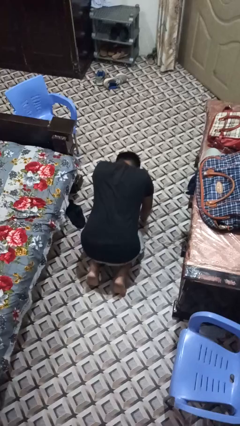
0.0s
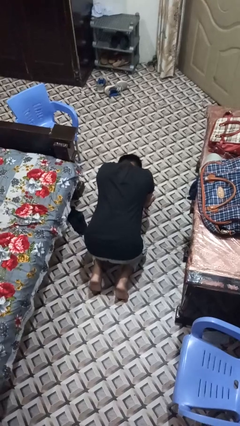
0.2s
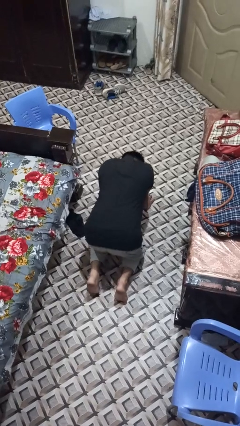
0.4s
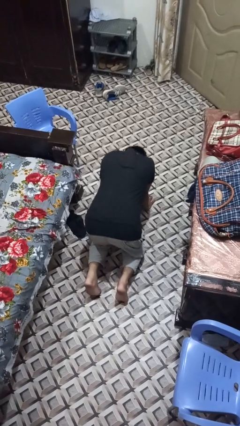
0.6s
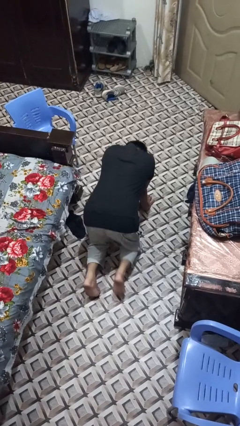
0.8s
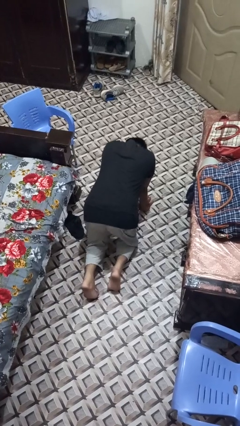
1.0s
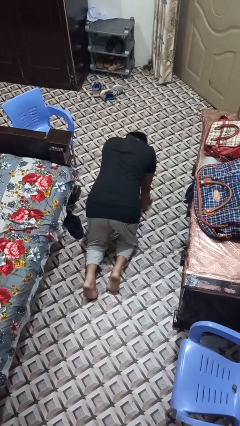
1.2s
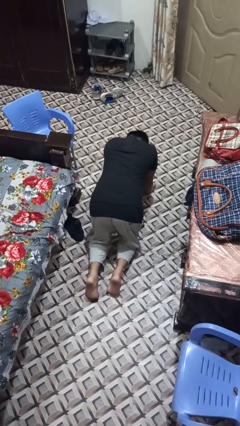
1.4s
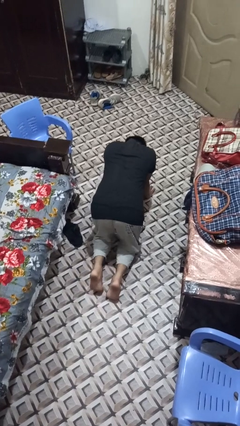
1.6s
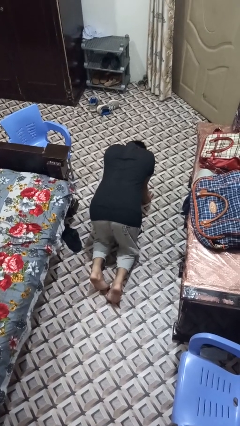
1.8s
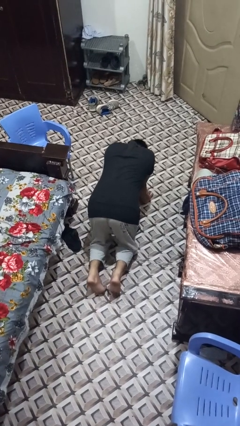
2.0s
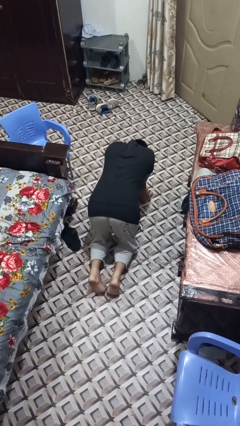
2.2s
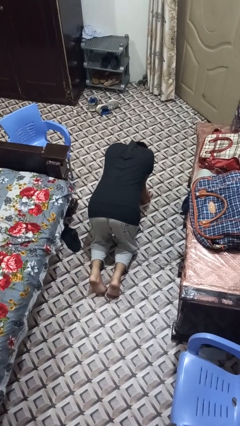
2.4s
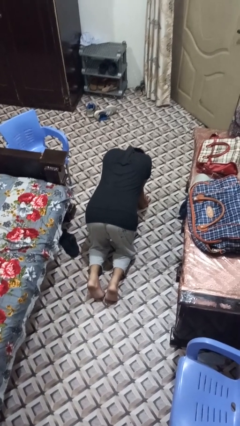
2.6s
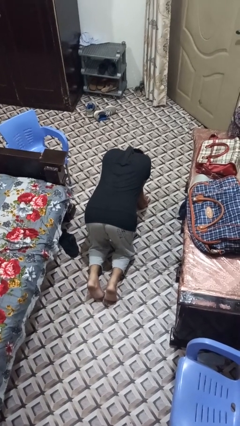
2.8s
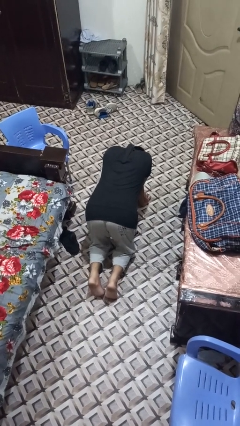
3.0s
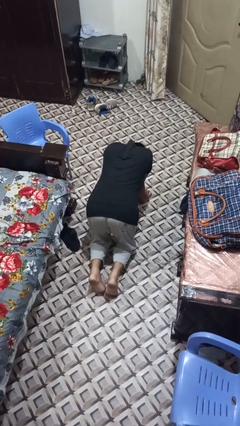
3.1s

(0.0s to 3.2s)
person crawls

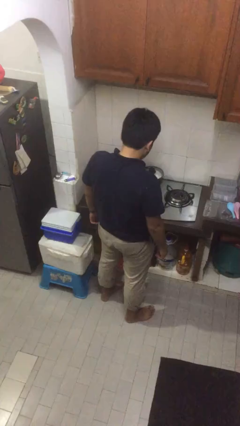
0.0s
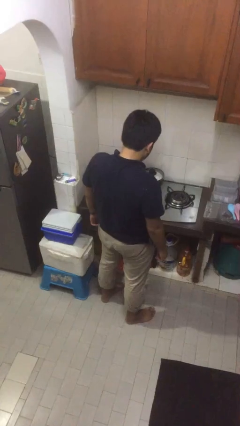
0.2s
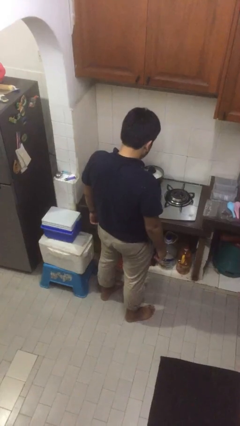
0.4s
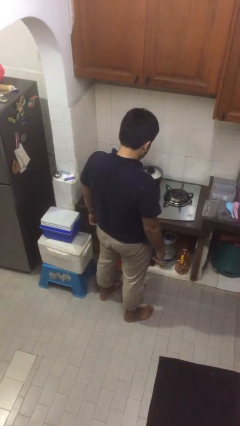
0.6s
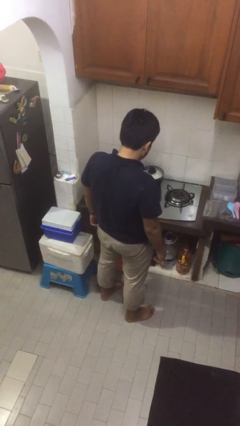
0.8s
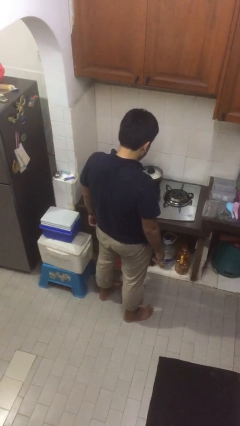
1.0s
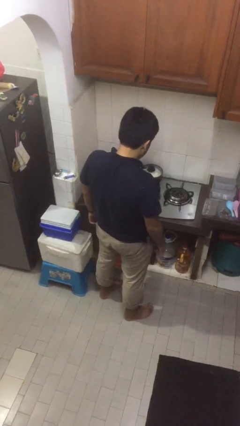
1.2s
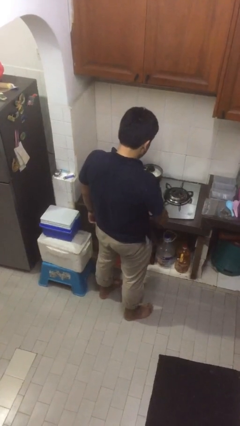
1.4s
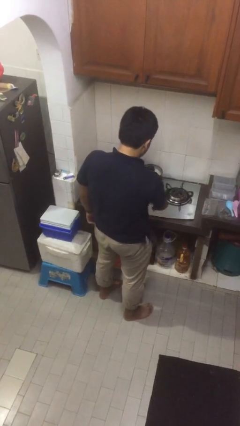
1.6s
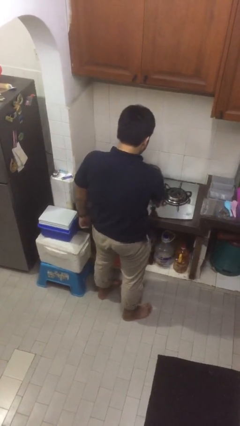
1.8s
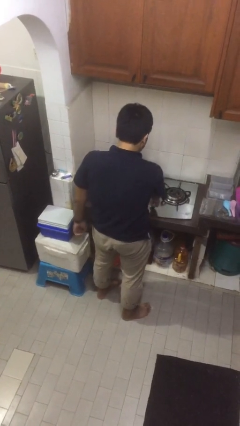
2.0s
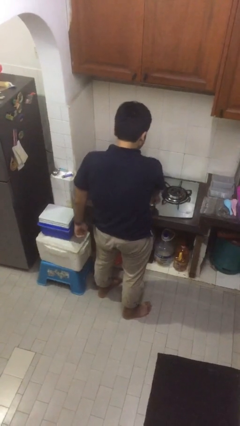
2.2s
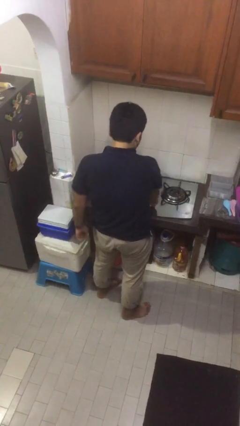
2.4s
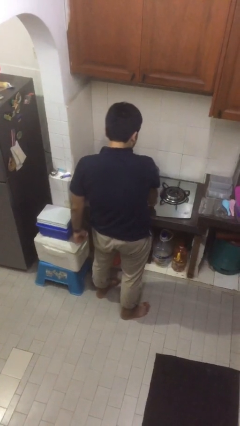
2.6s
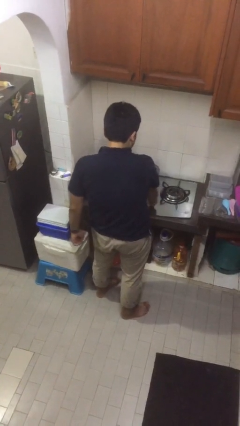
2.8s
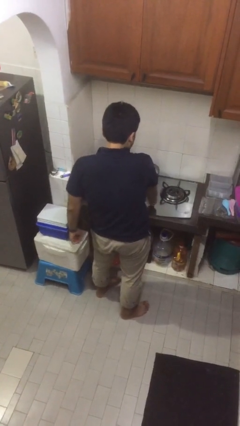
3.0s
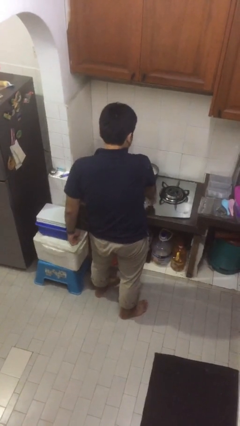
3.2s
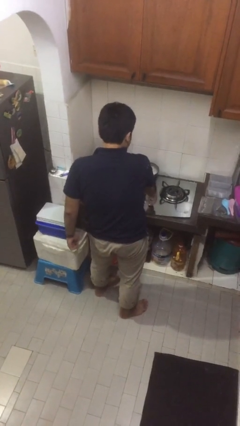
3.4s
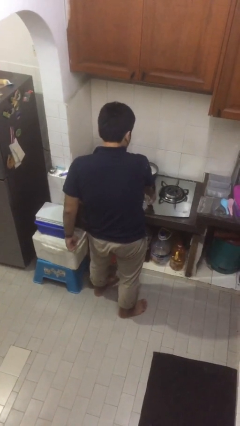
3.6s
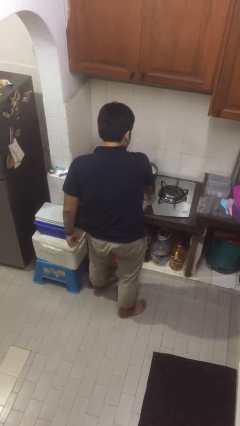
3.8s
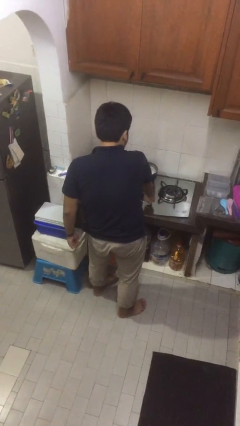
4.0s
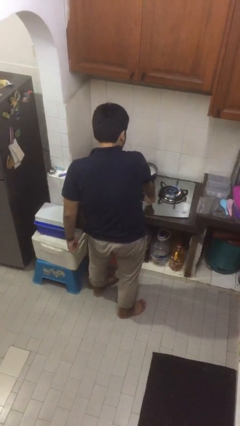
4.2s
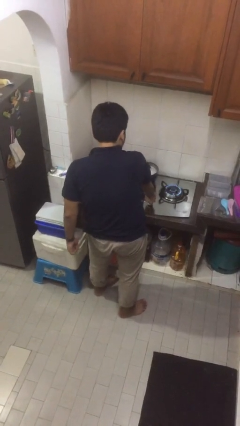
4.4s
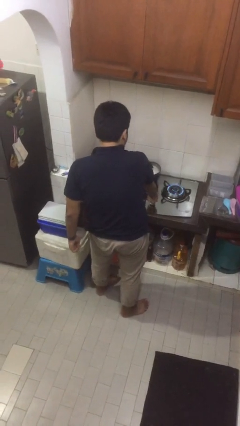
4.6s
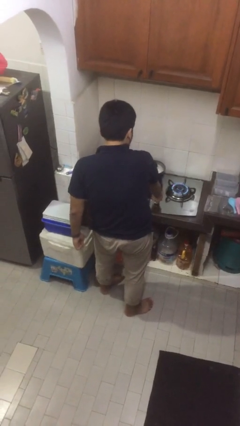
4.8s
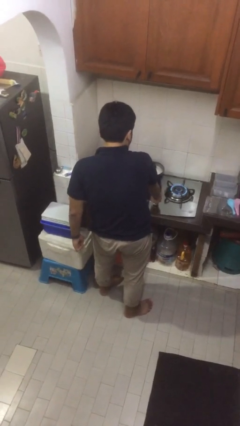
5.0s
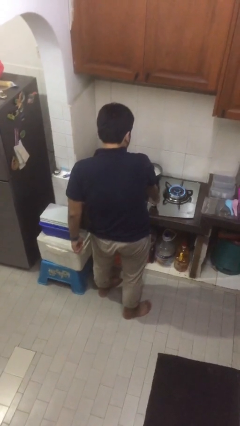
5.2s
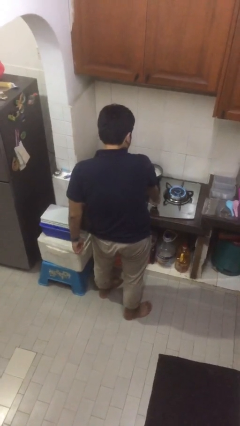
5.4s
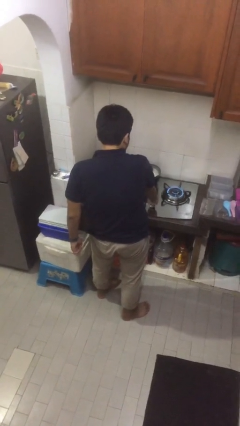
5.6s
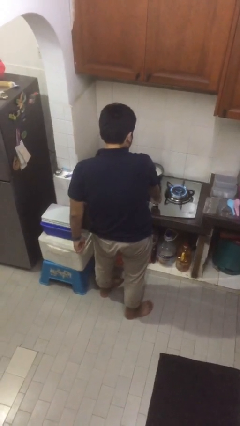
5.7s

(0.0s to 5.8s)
person turns on stovetop

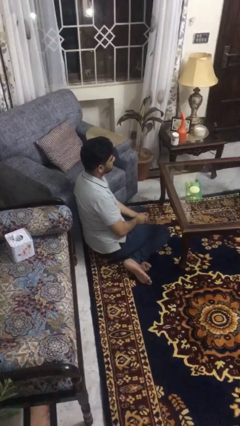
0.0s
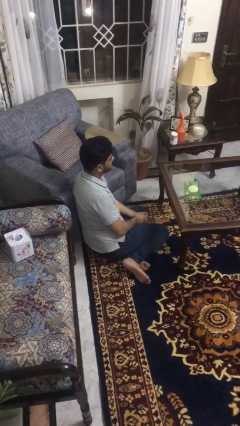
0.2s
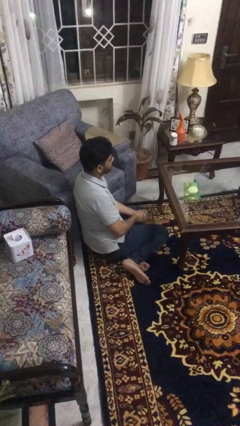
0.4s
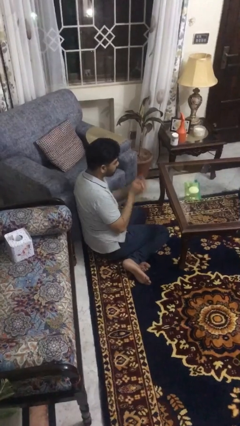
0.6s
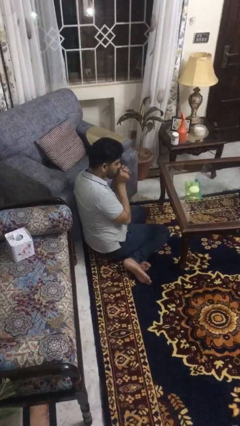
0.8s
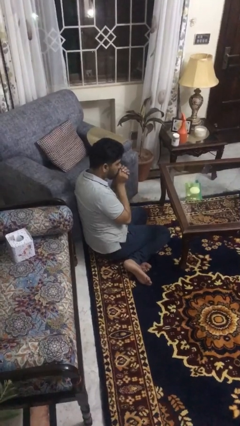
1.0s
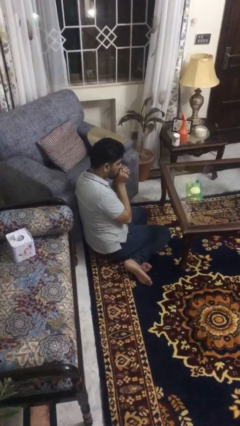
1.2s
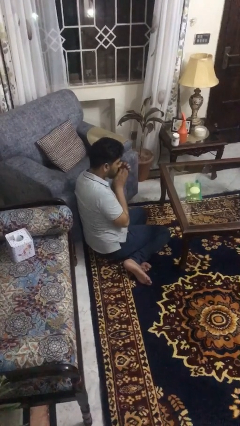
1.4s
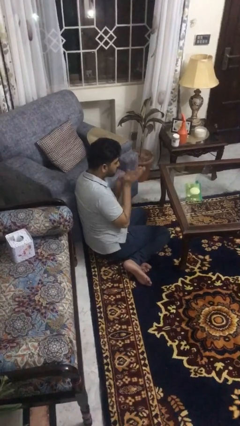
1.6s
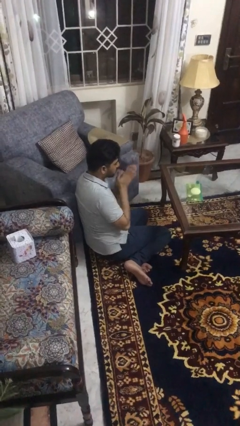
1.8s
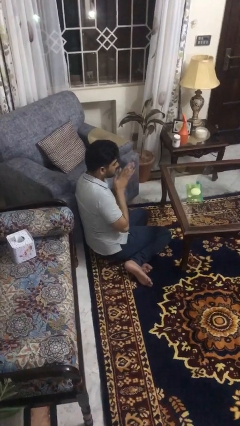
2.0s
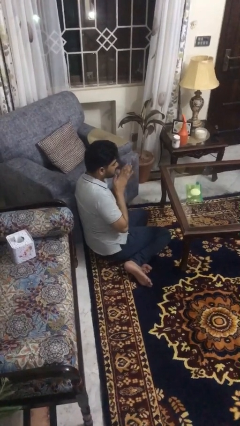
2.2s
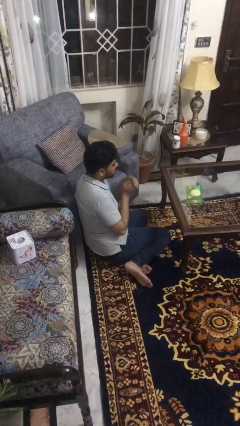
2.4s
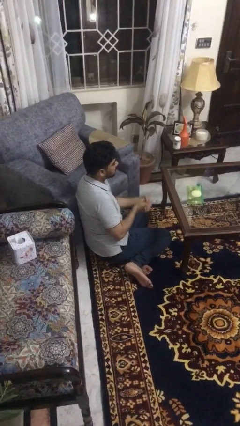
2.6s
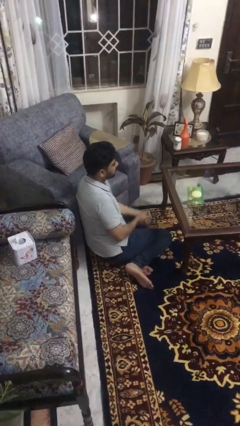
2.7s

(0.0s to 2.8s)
person blows into hands

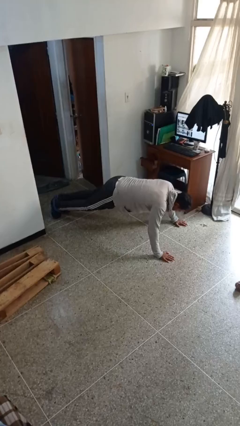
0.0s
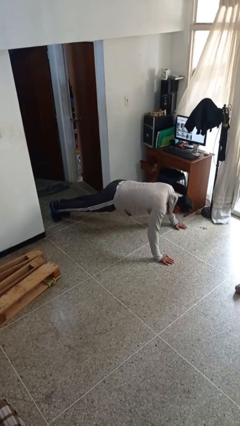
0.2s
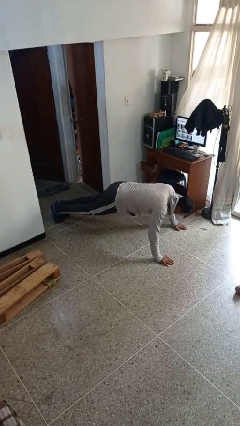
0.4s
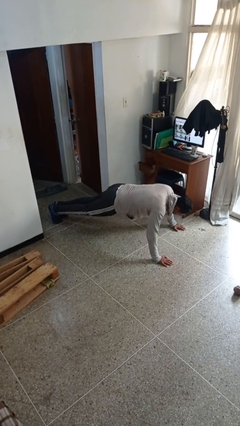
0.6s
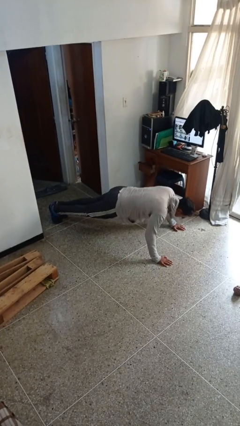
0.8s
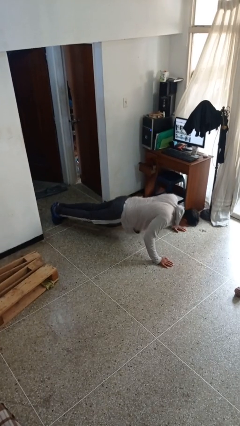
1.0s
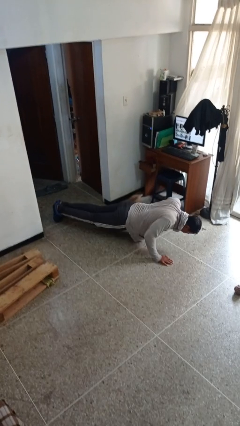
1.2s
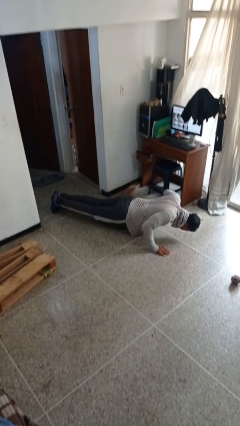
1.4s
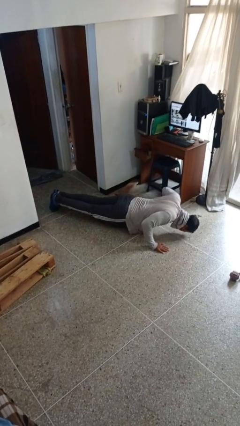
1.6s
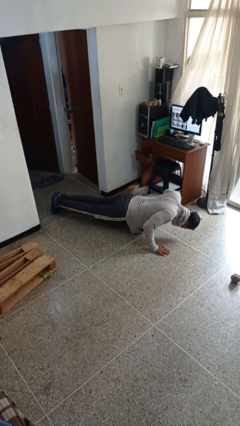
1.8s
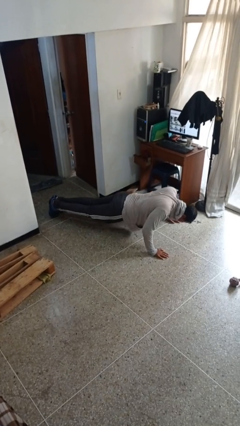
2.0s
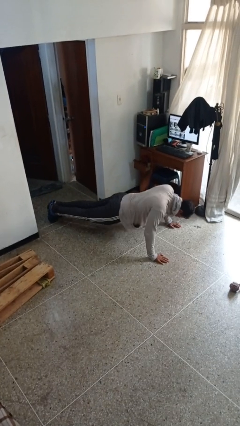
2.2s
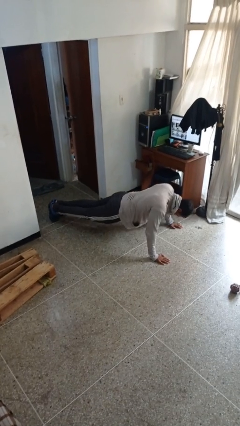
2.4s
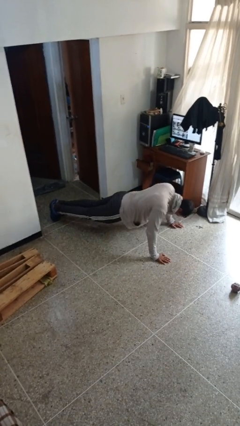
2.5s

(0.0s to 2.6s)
person exercises with pushup

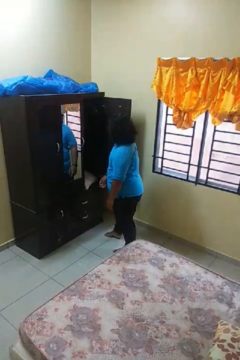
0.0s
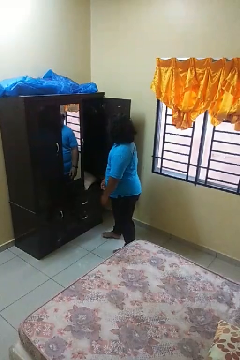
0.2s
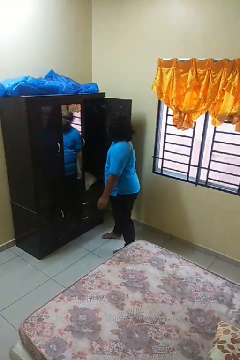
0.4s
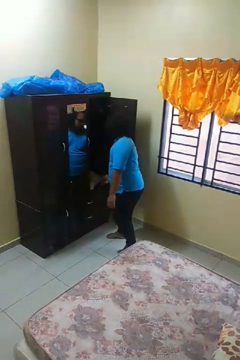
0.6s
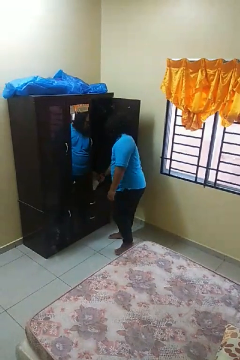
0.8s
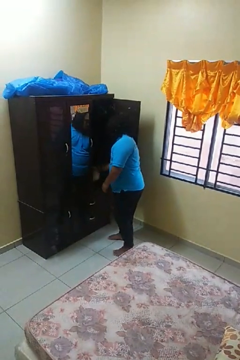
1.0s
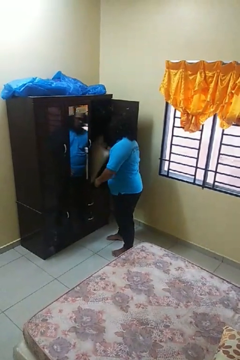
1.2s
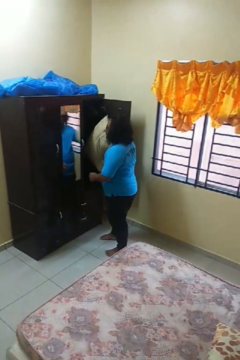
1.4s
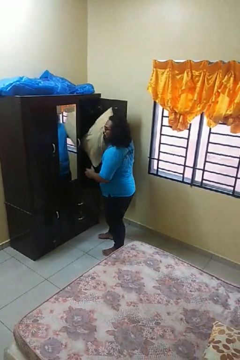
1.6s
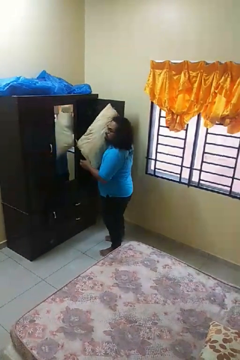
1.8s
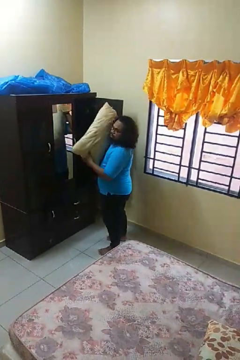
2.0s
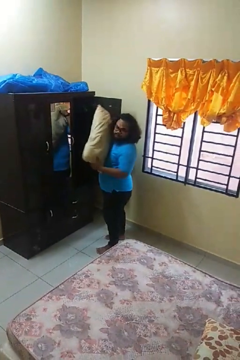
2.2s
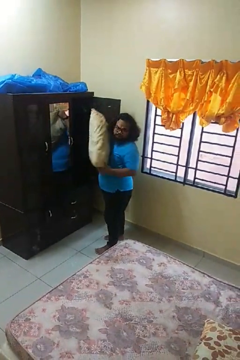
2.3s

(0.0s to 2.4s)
person picks up object from cabinet

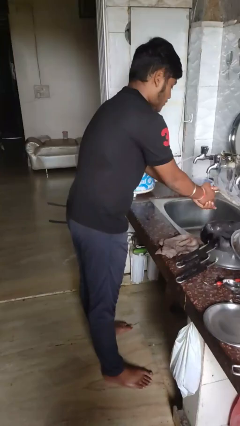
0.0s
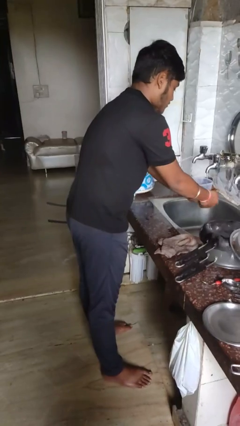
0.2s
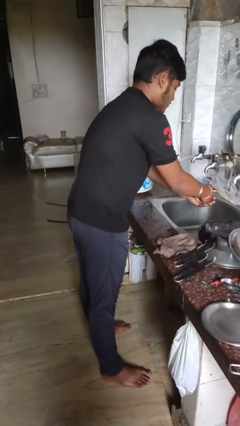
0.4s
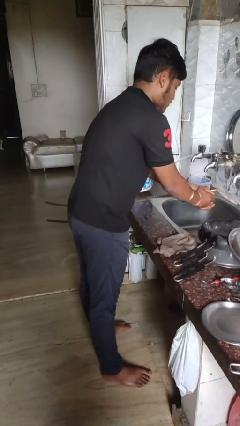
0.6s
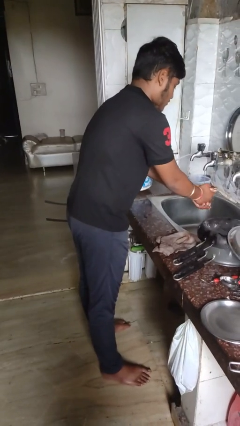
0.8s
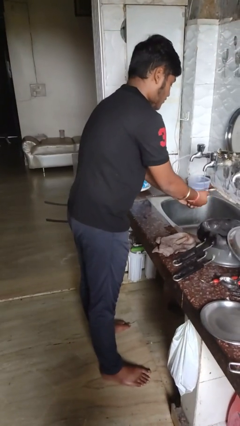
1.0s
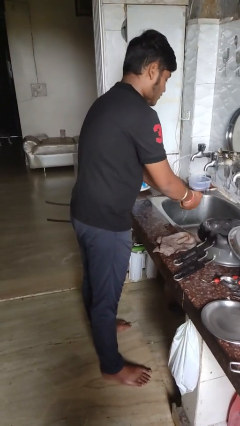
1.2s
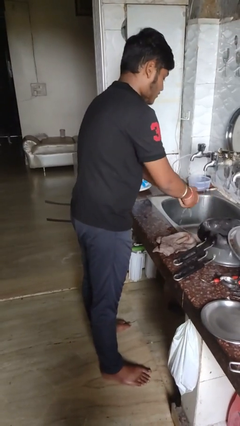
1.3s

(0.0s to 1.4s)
person washes hands
